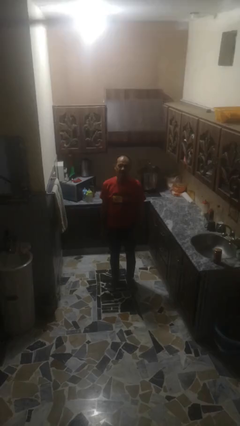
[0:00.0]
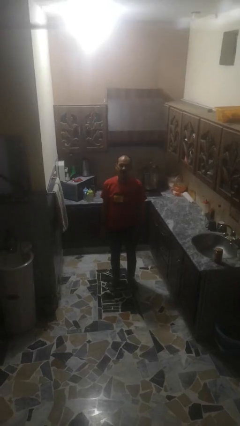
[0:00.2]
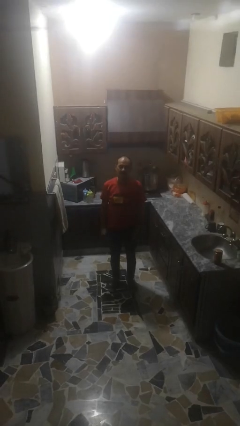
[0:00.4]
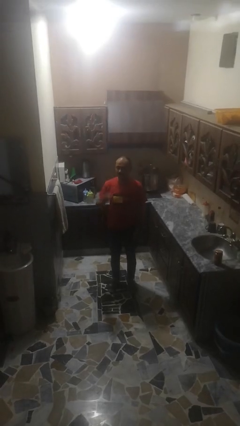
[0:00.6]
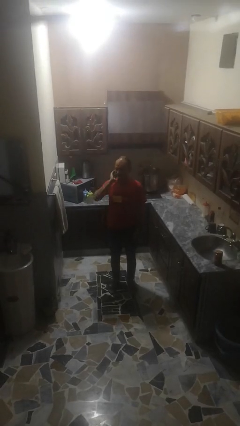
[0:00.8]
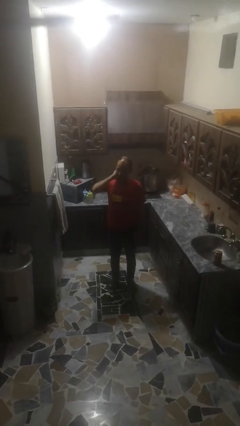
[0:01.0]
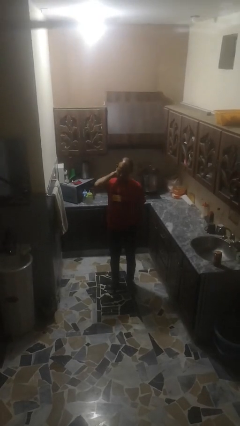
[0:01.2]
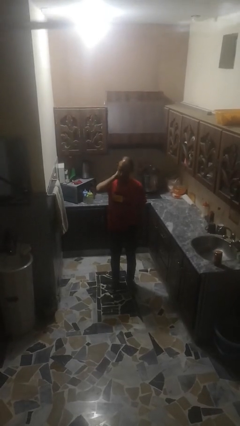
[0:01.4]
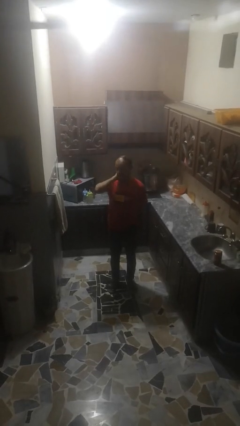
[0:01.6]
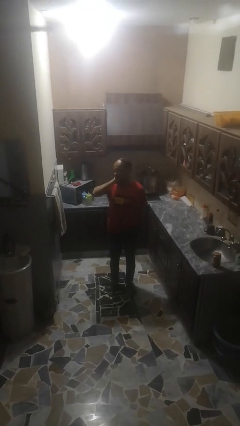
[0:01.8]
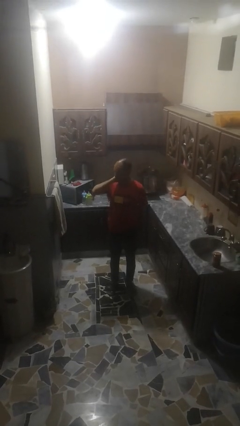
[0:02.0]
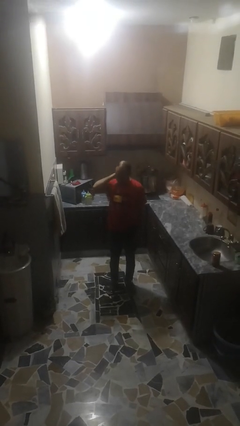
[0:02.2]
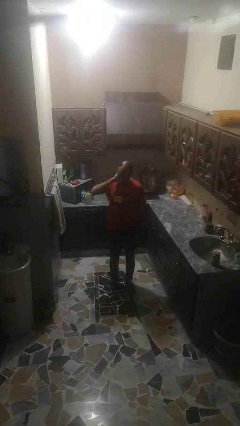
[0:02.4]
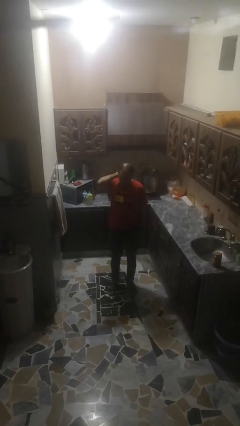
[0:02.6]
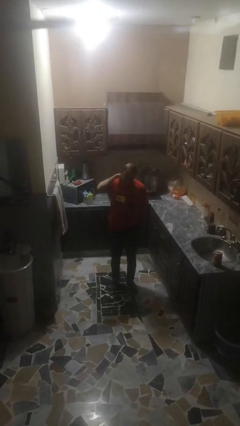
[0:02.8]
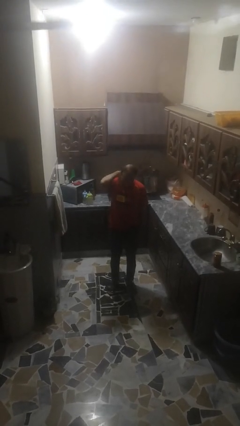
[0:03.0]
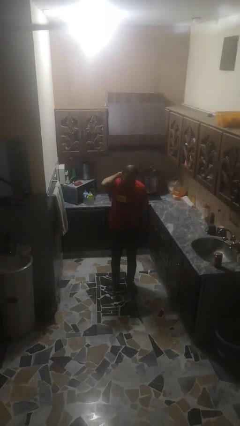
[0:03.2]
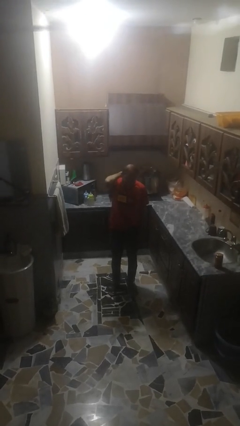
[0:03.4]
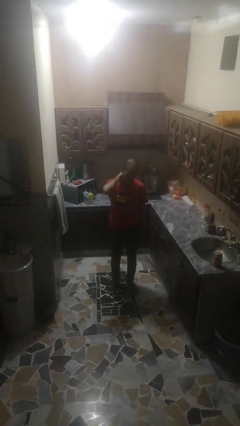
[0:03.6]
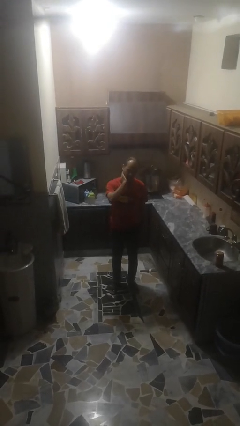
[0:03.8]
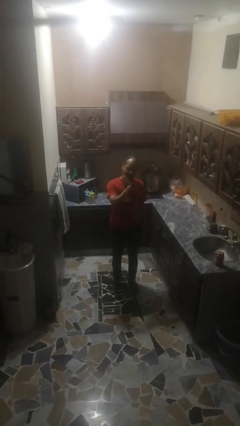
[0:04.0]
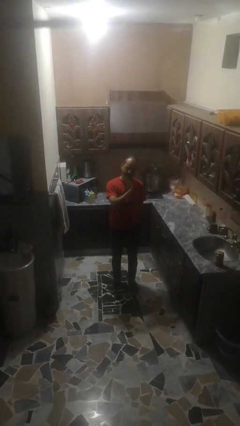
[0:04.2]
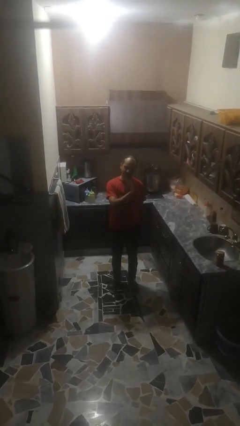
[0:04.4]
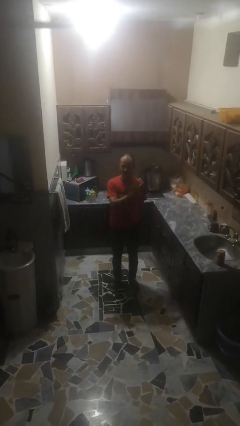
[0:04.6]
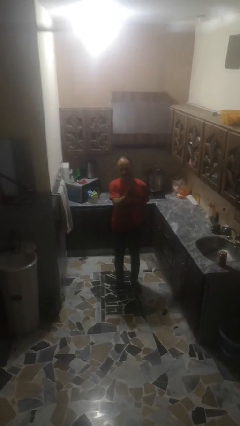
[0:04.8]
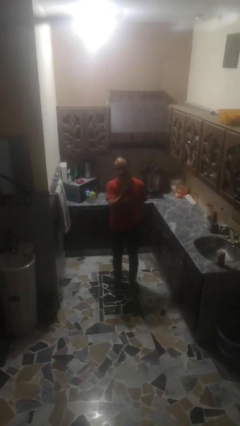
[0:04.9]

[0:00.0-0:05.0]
person rubs neck

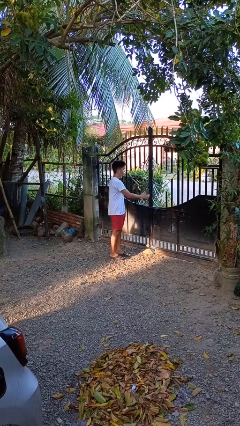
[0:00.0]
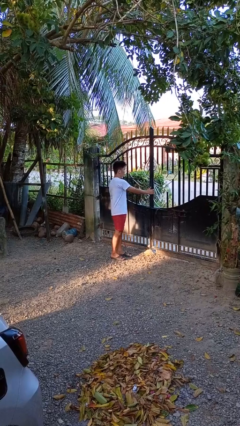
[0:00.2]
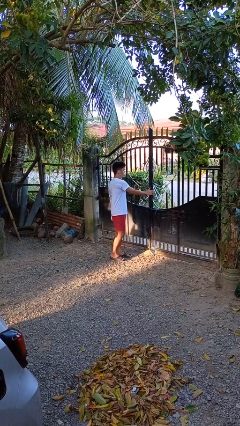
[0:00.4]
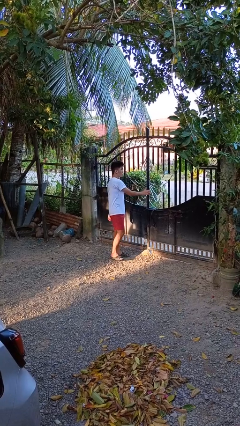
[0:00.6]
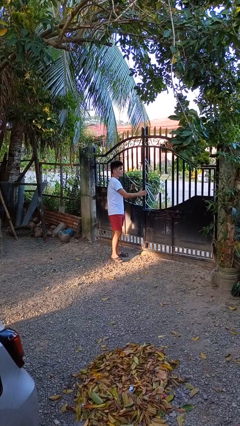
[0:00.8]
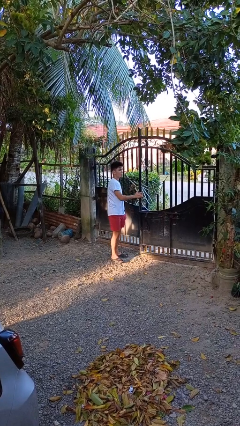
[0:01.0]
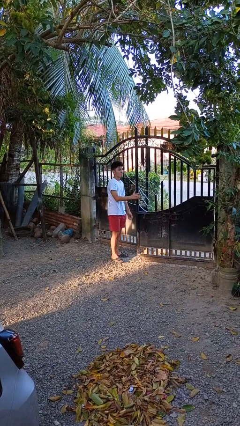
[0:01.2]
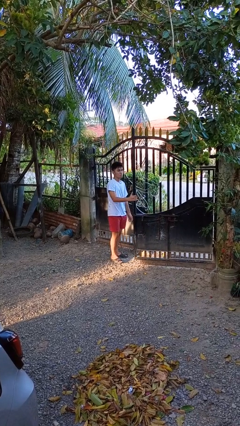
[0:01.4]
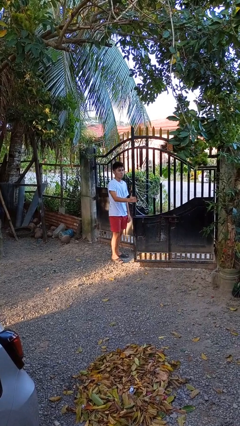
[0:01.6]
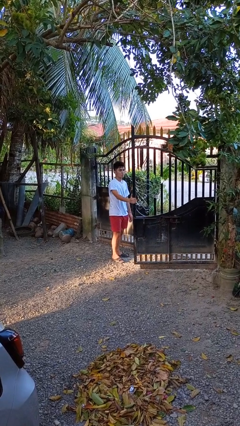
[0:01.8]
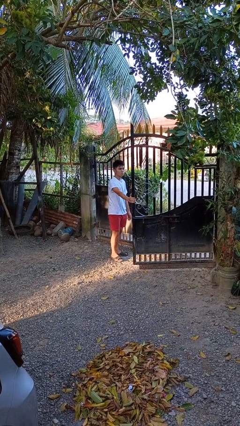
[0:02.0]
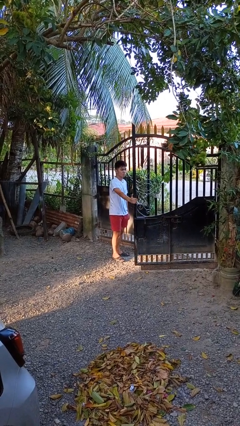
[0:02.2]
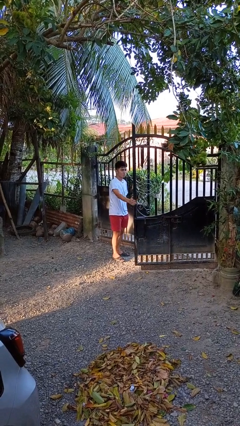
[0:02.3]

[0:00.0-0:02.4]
person opens gate

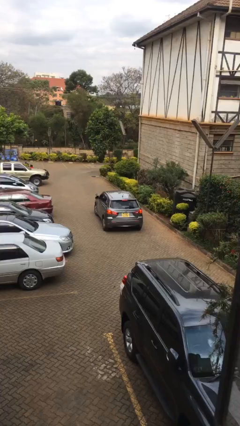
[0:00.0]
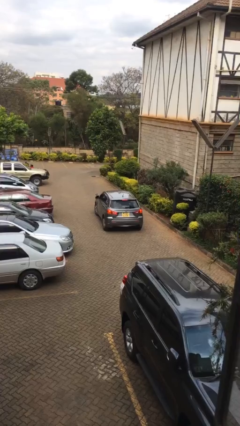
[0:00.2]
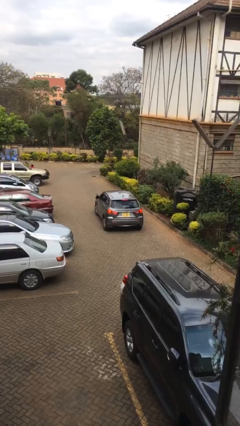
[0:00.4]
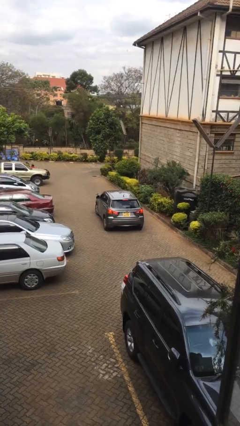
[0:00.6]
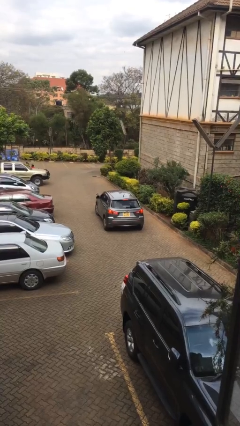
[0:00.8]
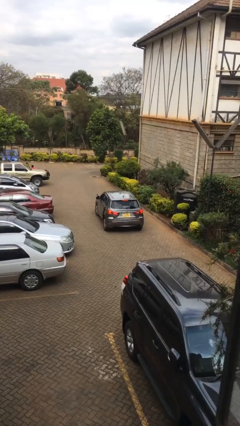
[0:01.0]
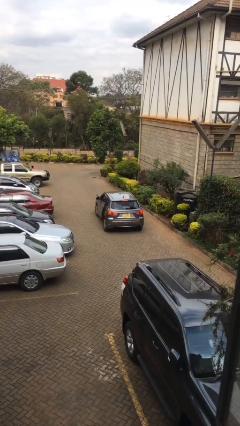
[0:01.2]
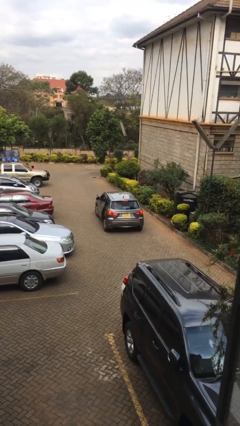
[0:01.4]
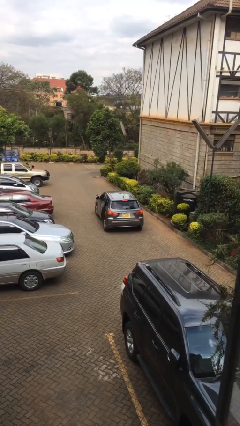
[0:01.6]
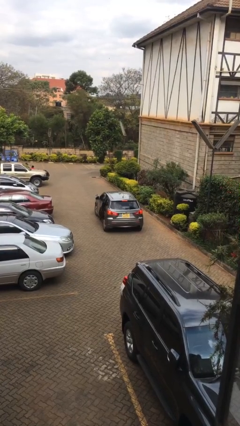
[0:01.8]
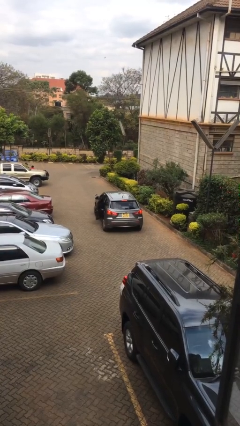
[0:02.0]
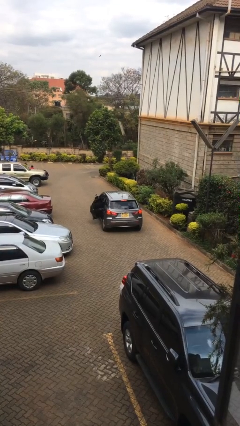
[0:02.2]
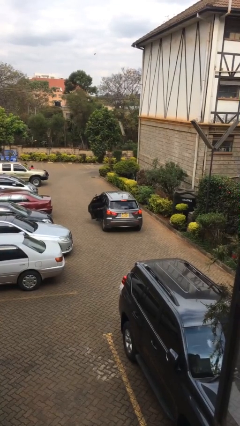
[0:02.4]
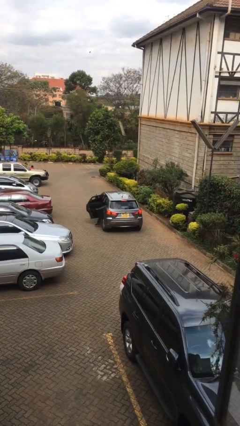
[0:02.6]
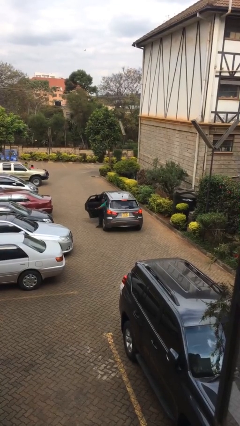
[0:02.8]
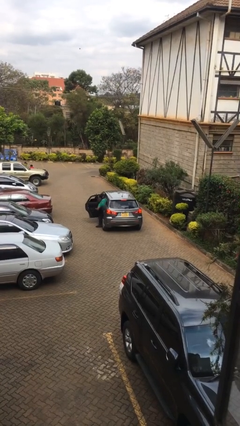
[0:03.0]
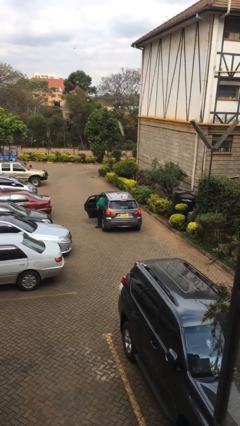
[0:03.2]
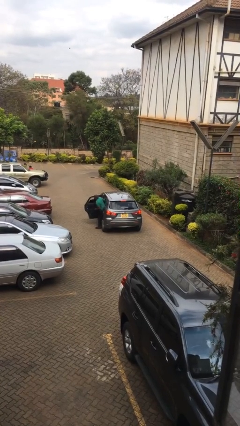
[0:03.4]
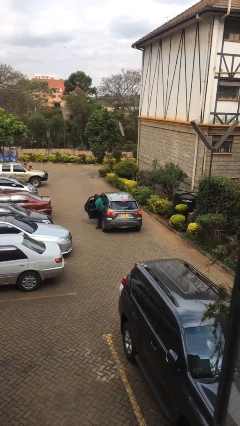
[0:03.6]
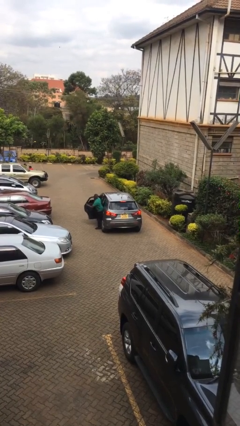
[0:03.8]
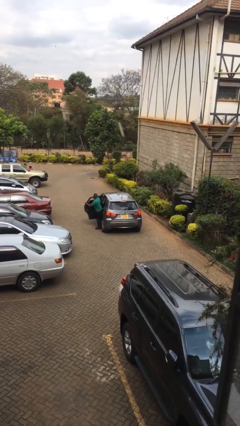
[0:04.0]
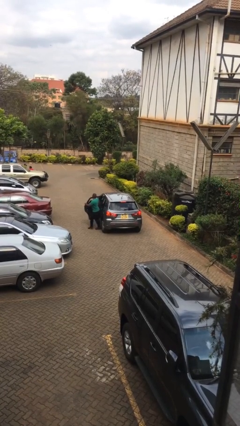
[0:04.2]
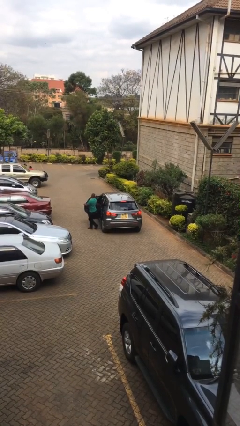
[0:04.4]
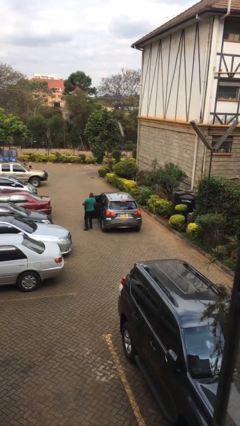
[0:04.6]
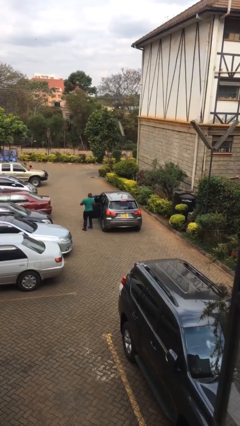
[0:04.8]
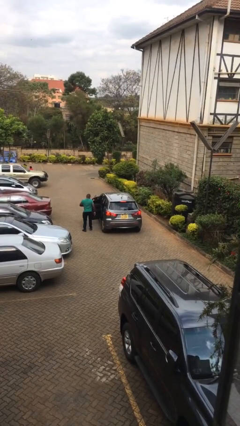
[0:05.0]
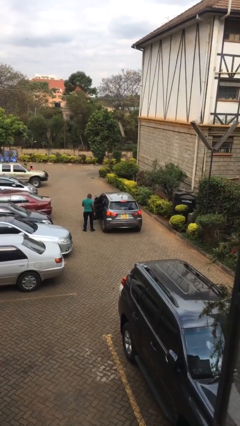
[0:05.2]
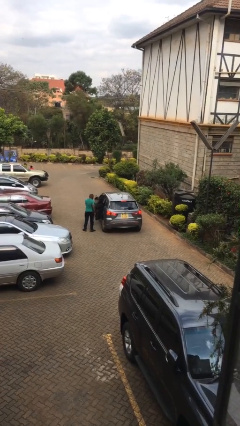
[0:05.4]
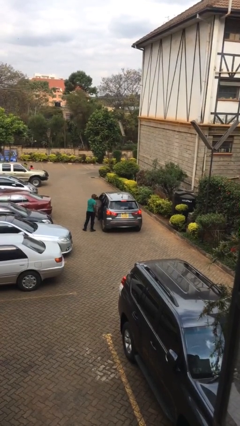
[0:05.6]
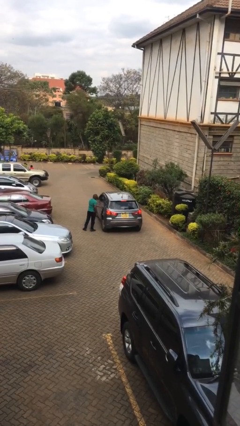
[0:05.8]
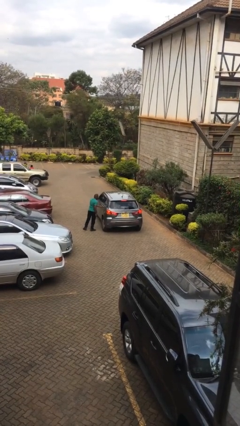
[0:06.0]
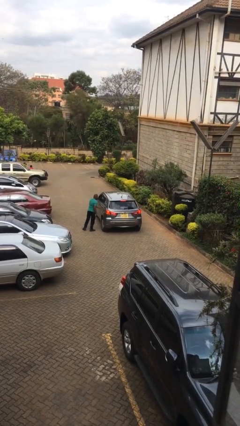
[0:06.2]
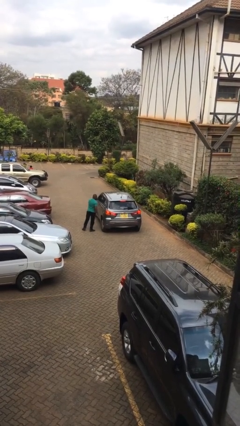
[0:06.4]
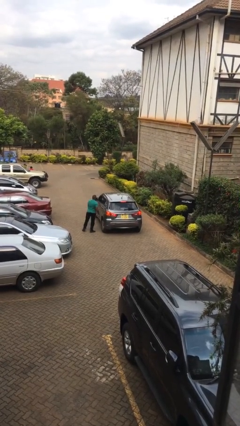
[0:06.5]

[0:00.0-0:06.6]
car drops off person

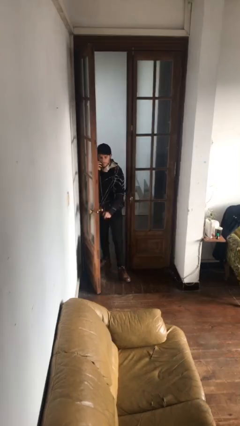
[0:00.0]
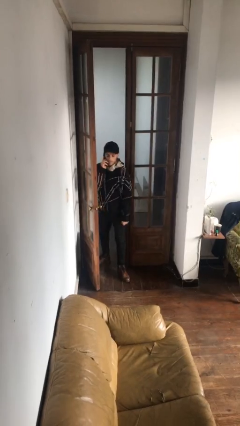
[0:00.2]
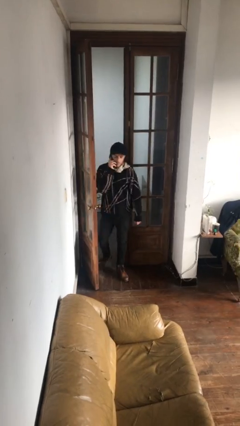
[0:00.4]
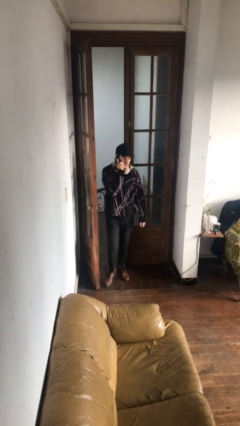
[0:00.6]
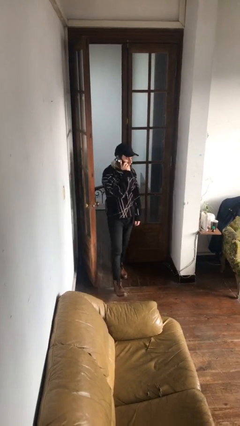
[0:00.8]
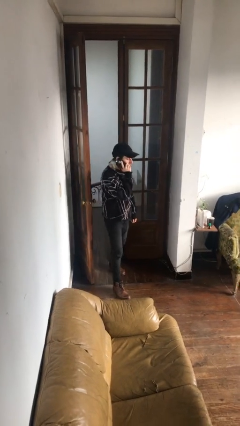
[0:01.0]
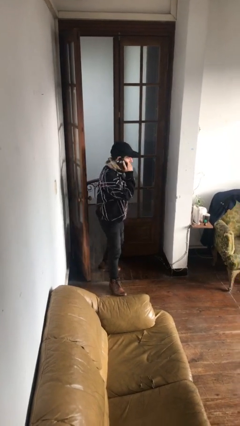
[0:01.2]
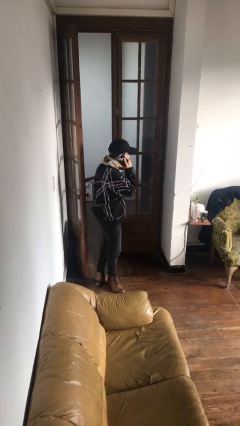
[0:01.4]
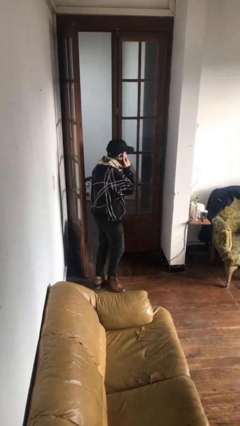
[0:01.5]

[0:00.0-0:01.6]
person enters scene through structure

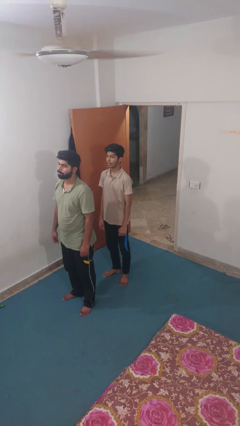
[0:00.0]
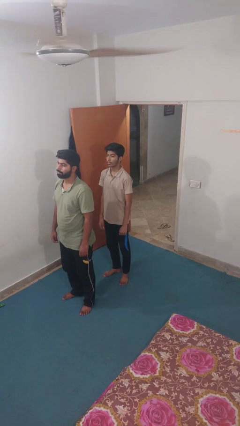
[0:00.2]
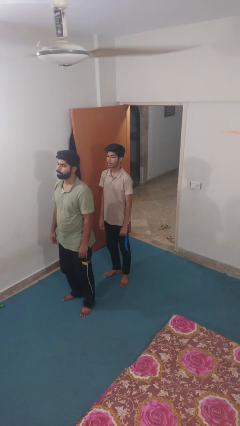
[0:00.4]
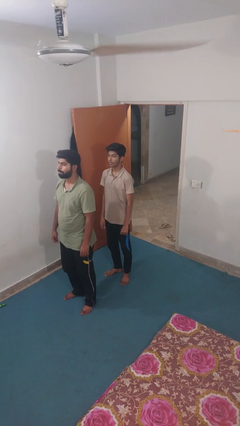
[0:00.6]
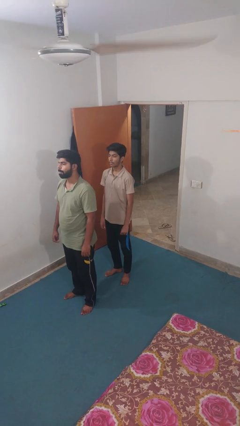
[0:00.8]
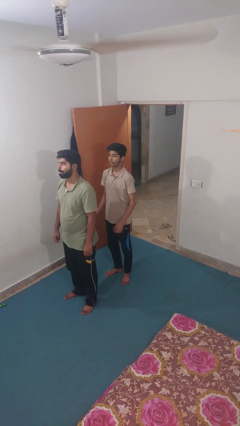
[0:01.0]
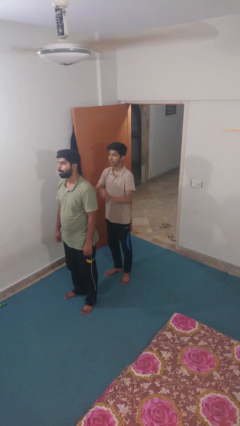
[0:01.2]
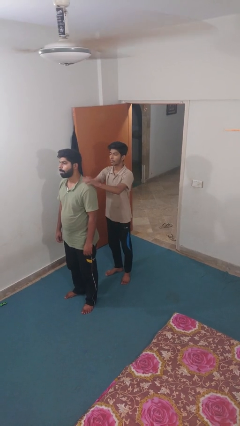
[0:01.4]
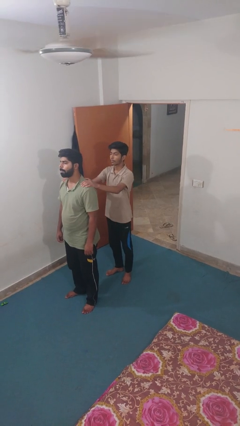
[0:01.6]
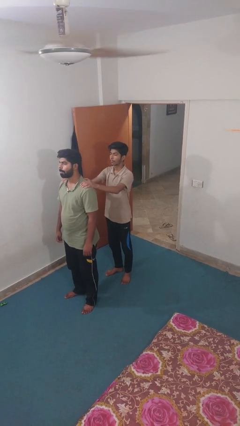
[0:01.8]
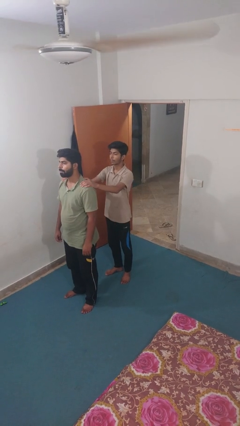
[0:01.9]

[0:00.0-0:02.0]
person grabs person by shoulder
